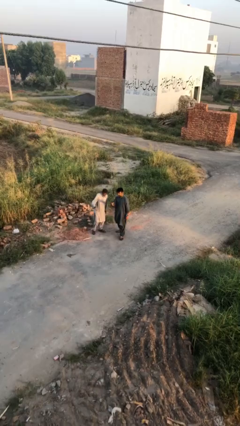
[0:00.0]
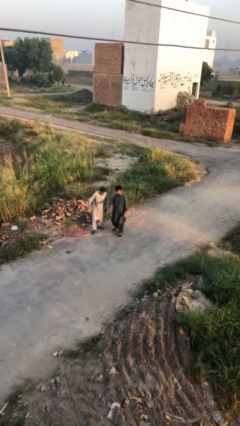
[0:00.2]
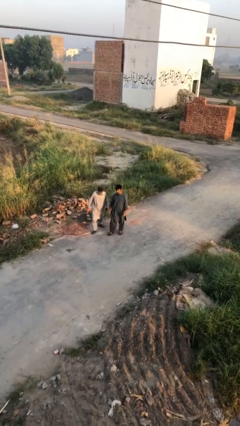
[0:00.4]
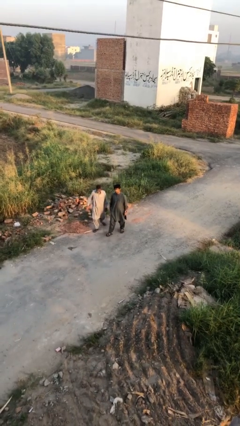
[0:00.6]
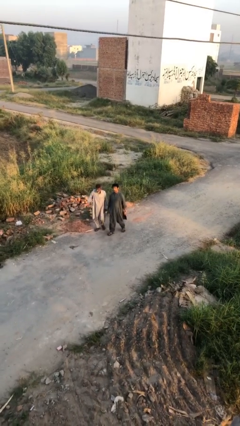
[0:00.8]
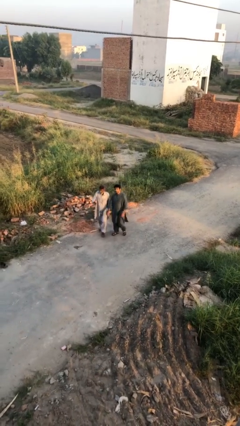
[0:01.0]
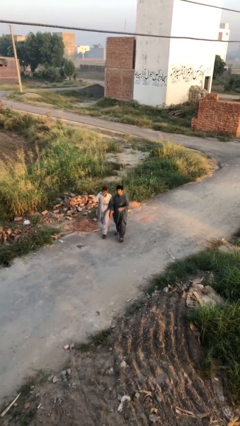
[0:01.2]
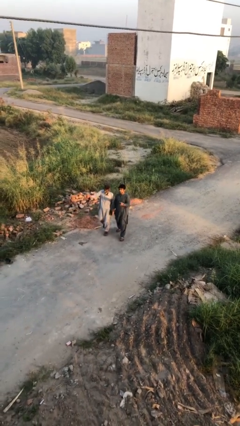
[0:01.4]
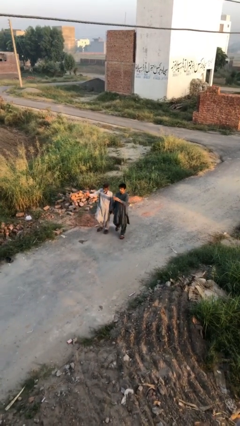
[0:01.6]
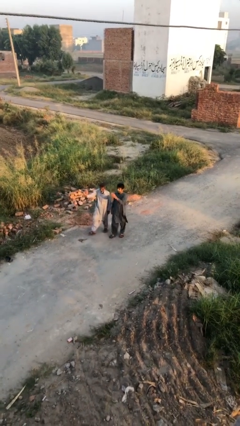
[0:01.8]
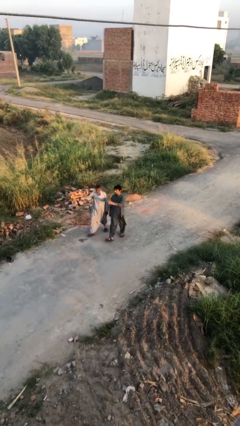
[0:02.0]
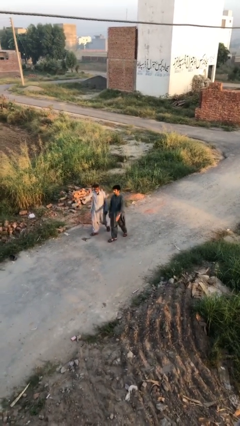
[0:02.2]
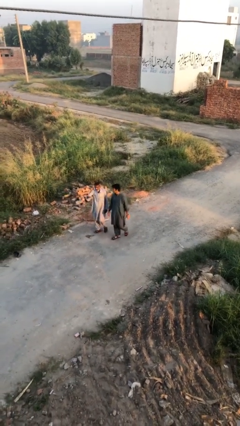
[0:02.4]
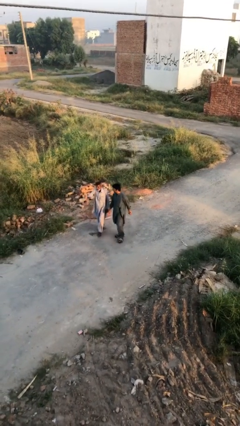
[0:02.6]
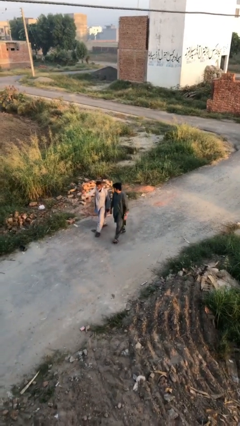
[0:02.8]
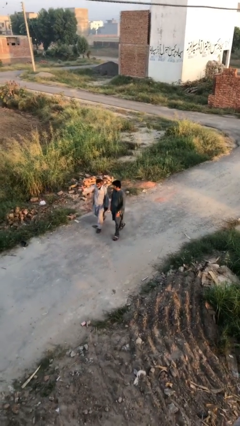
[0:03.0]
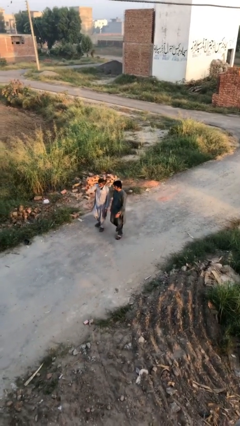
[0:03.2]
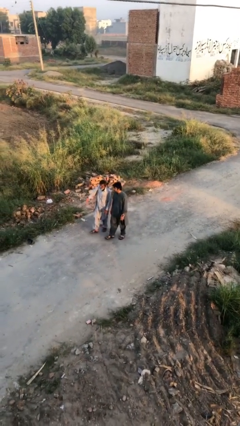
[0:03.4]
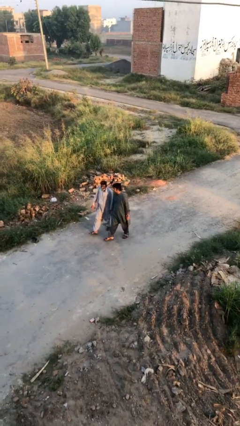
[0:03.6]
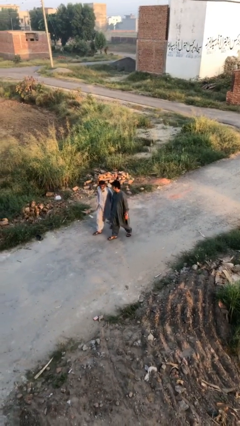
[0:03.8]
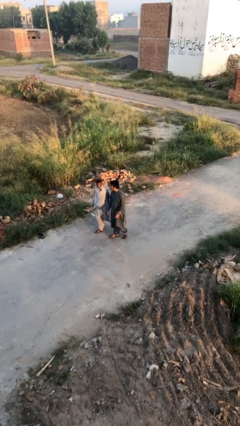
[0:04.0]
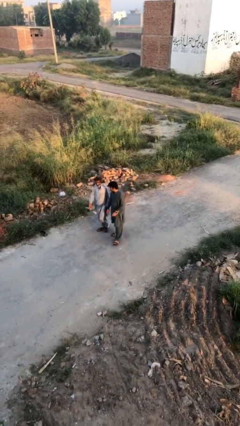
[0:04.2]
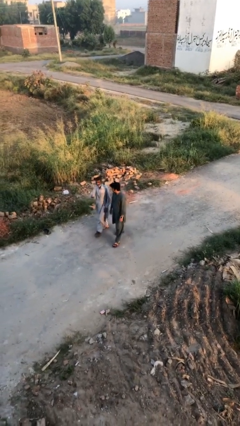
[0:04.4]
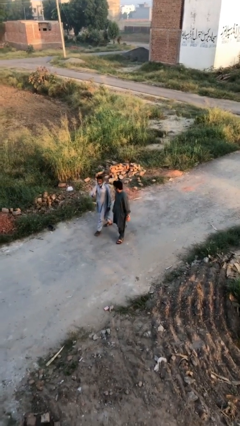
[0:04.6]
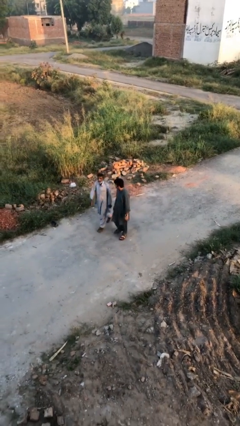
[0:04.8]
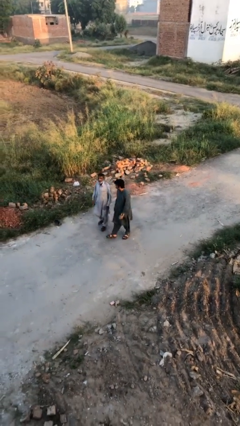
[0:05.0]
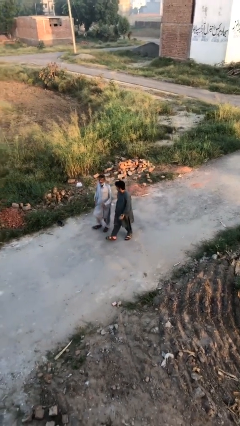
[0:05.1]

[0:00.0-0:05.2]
person talks to person

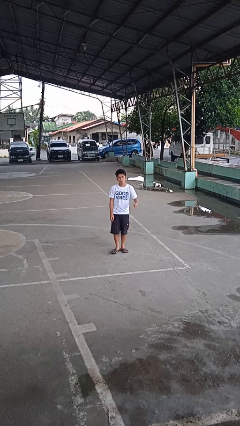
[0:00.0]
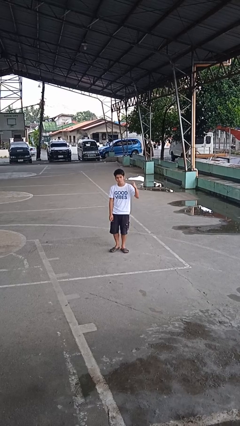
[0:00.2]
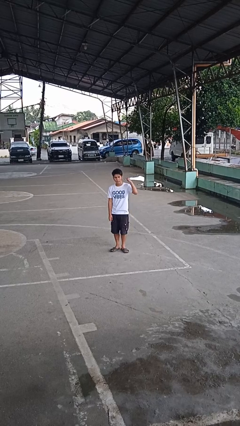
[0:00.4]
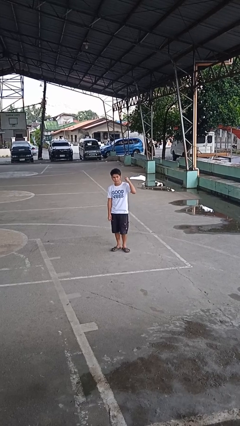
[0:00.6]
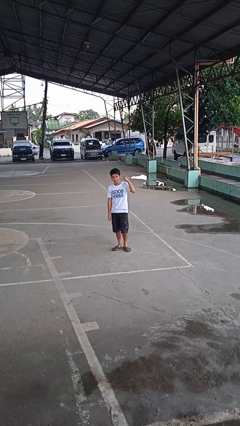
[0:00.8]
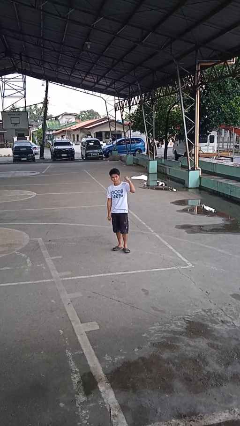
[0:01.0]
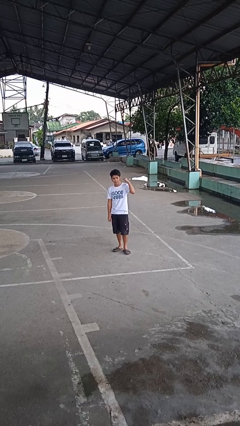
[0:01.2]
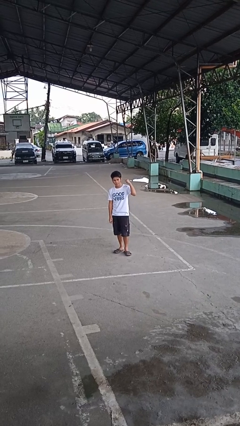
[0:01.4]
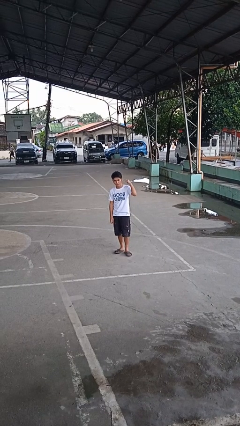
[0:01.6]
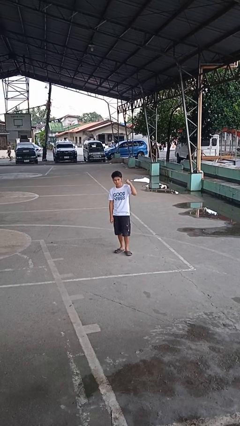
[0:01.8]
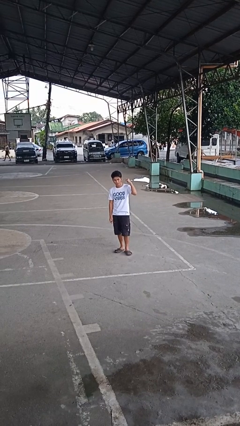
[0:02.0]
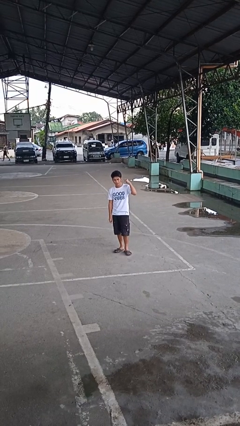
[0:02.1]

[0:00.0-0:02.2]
person gestures listen closely

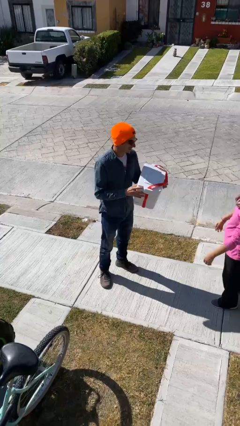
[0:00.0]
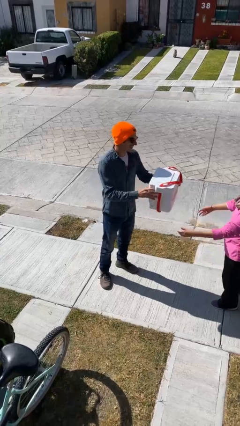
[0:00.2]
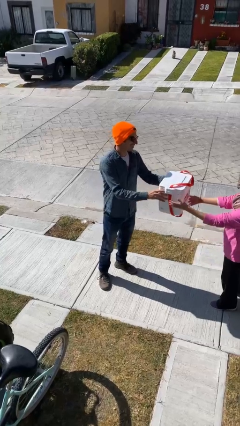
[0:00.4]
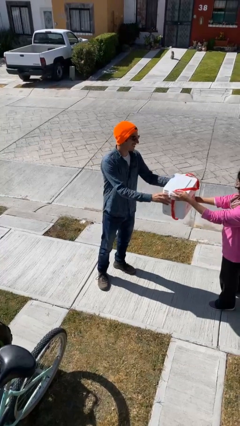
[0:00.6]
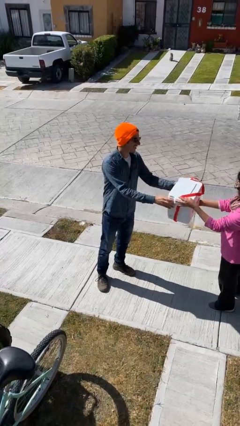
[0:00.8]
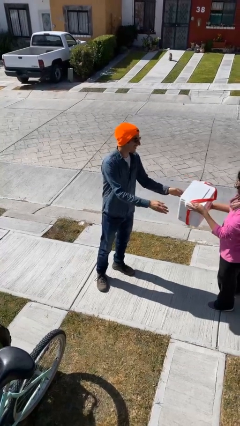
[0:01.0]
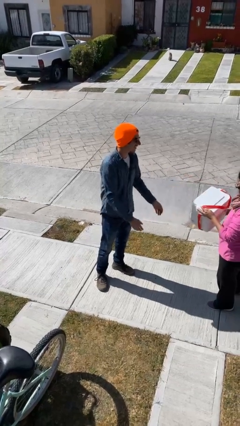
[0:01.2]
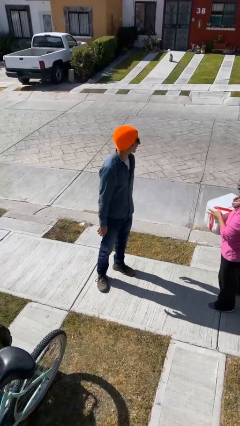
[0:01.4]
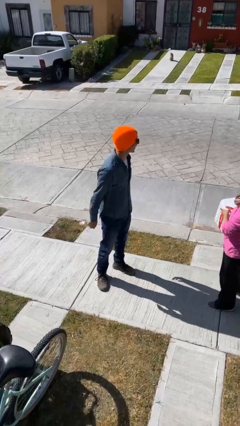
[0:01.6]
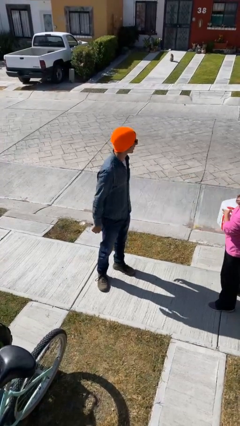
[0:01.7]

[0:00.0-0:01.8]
person transfers object to person

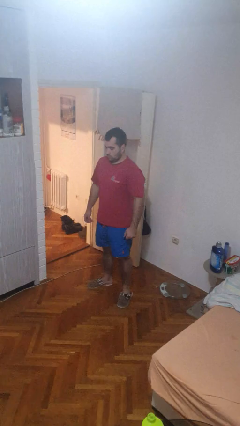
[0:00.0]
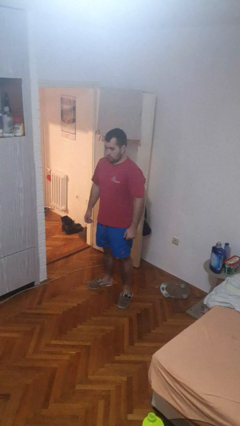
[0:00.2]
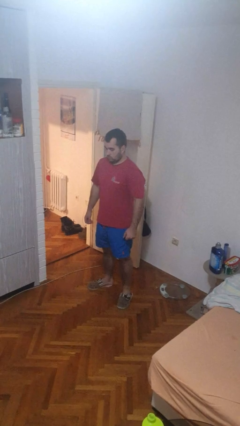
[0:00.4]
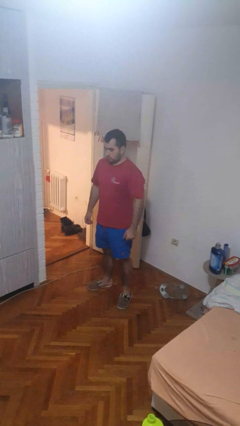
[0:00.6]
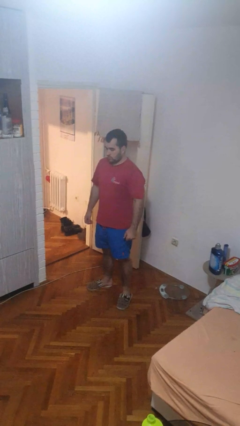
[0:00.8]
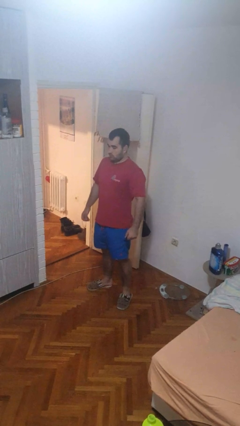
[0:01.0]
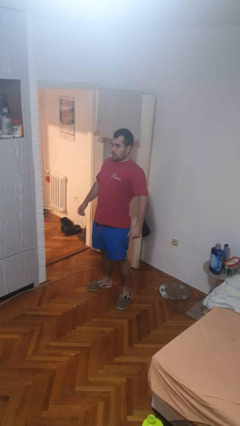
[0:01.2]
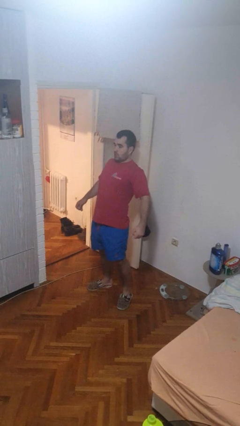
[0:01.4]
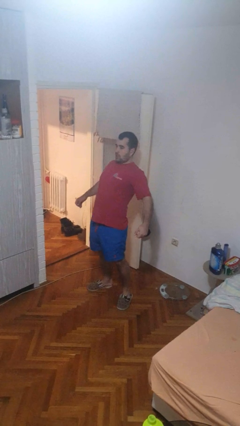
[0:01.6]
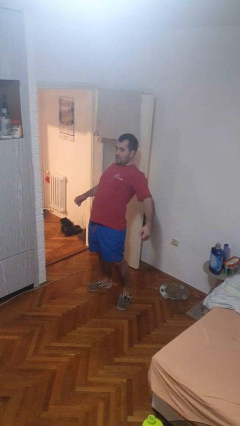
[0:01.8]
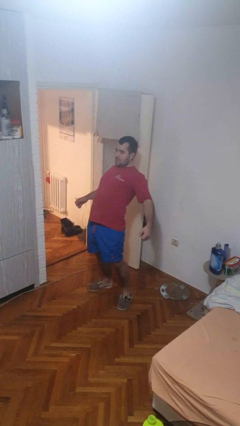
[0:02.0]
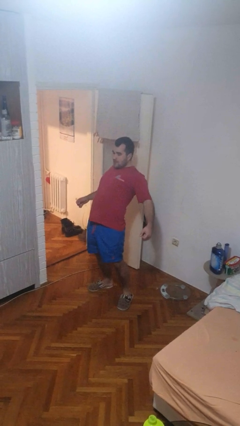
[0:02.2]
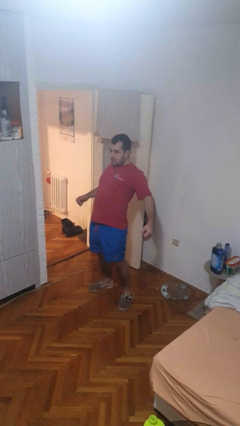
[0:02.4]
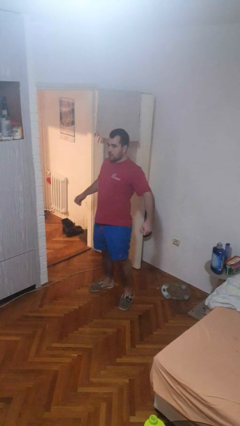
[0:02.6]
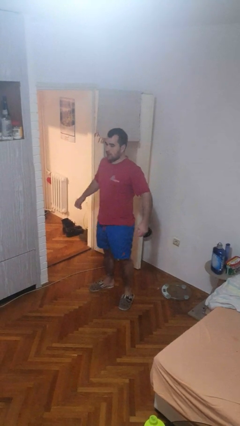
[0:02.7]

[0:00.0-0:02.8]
person stretches back

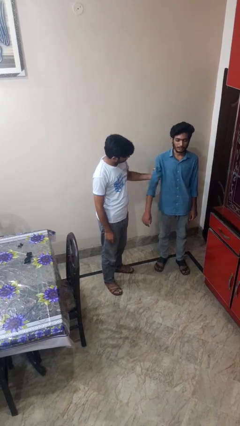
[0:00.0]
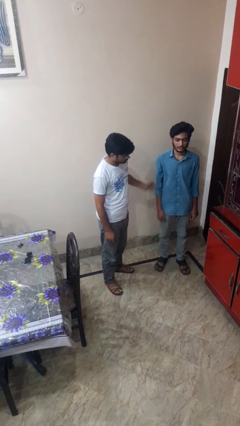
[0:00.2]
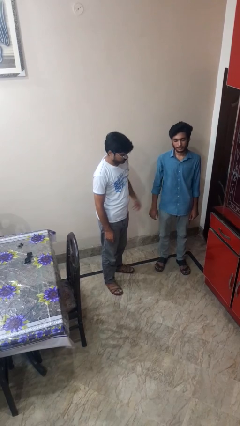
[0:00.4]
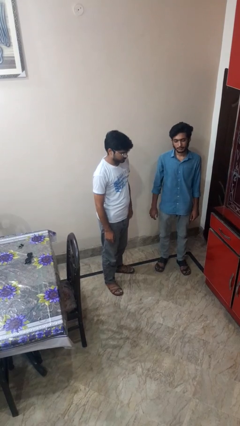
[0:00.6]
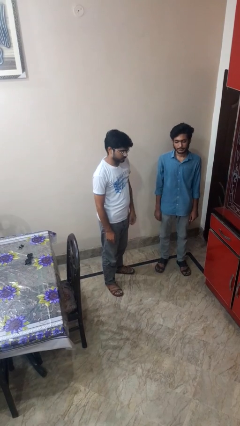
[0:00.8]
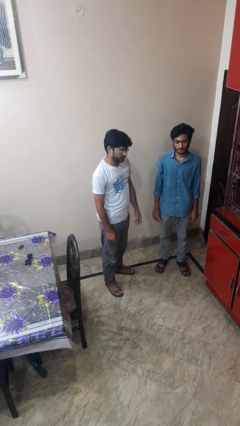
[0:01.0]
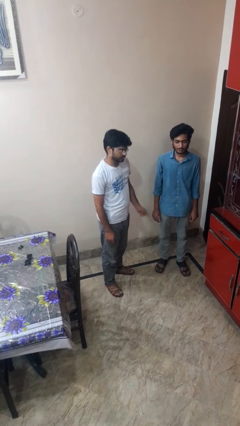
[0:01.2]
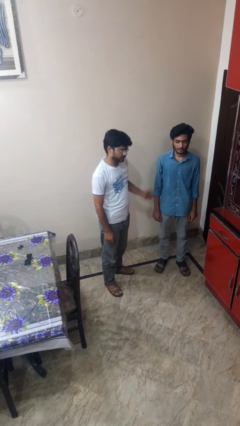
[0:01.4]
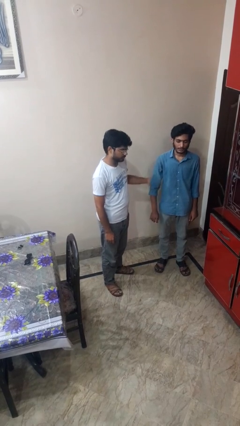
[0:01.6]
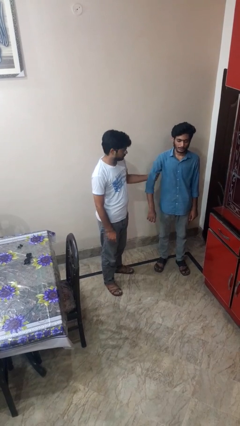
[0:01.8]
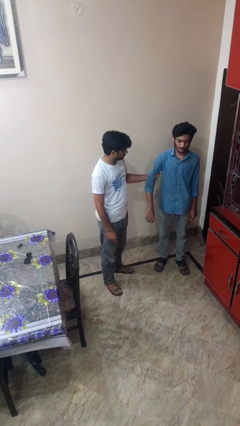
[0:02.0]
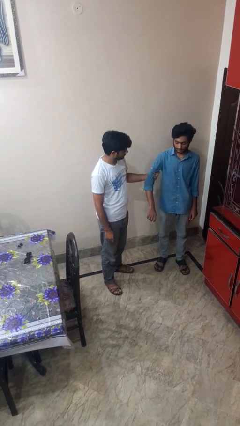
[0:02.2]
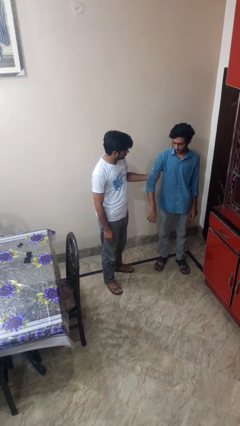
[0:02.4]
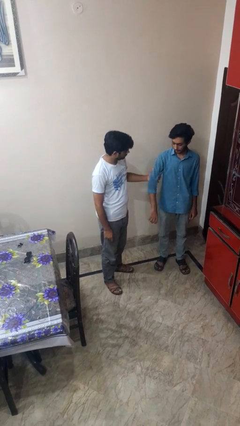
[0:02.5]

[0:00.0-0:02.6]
person takes object from backpack

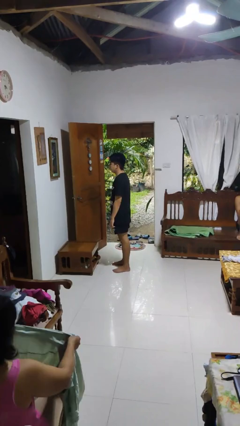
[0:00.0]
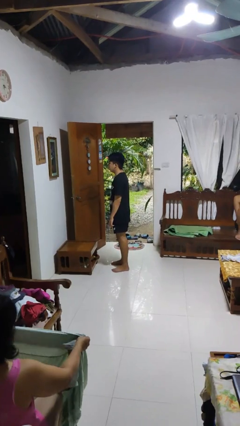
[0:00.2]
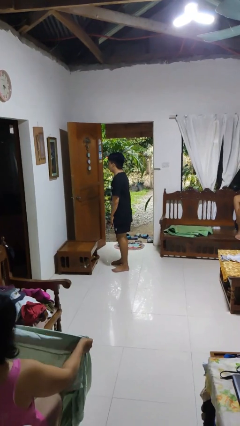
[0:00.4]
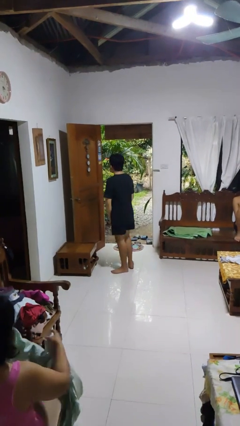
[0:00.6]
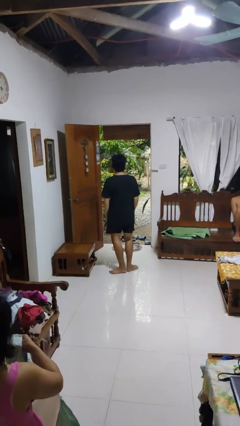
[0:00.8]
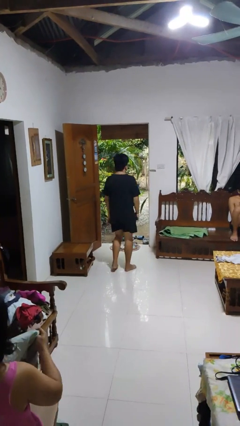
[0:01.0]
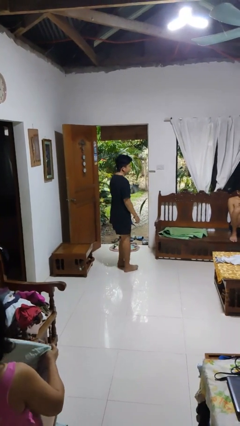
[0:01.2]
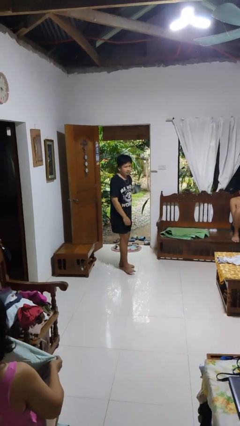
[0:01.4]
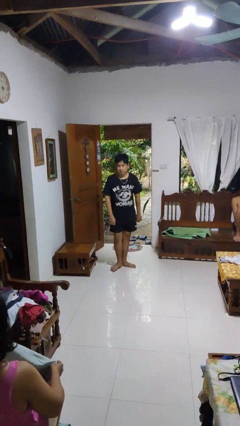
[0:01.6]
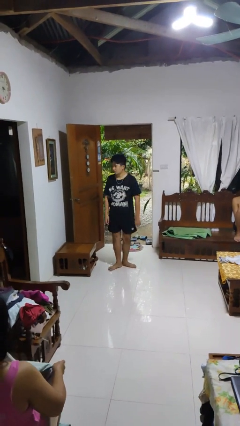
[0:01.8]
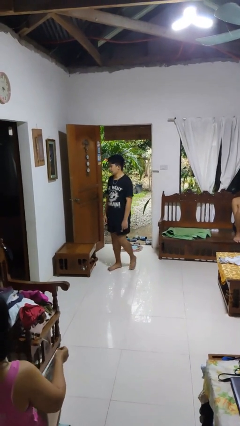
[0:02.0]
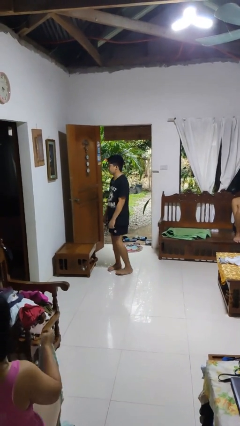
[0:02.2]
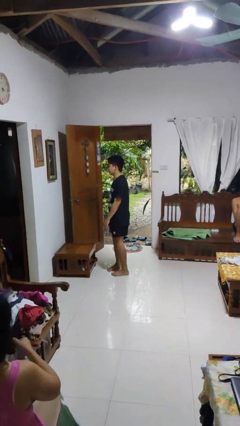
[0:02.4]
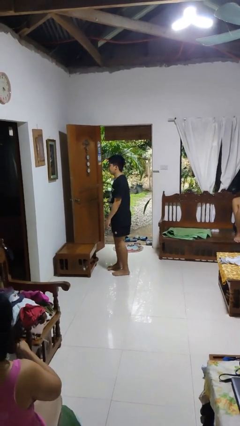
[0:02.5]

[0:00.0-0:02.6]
person twirls
